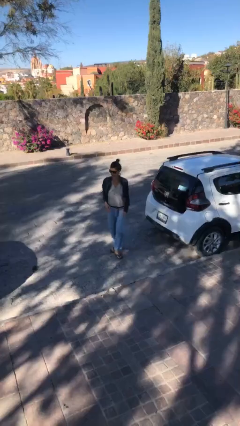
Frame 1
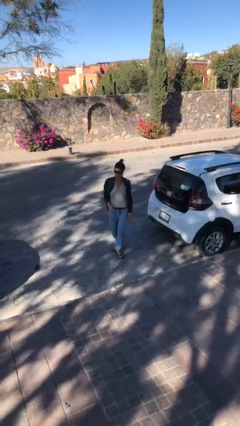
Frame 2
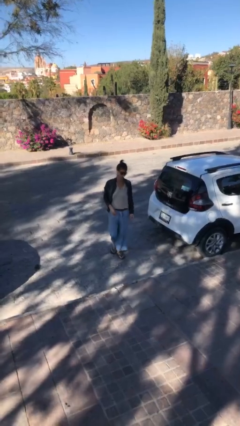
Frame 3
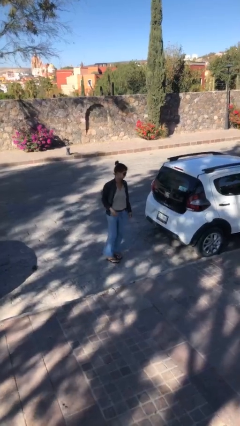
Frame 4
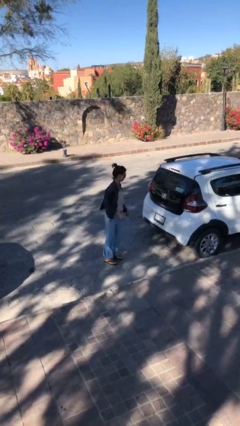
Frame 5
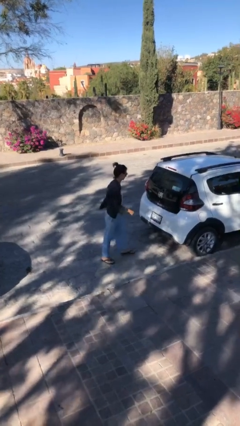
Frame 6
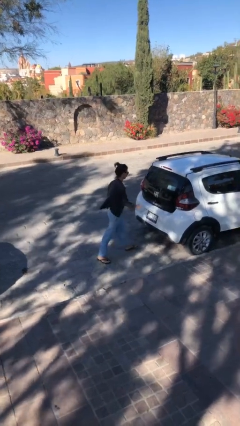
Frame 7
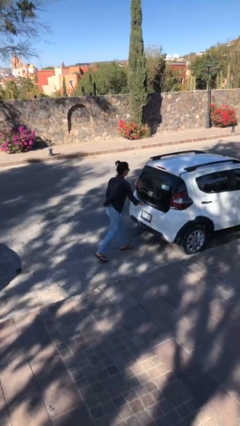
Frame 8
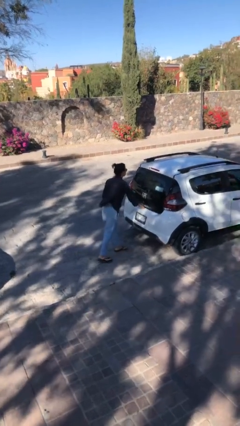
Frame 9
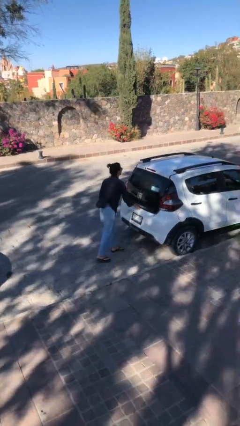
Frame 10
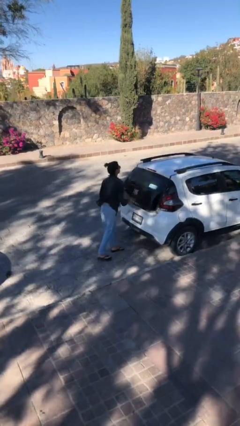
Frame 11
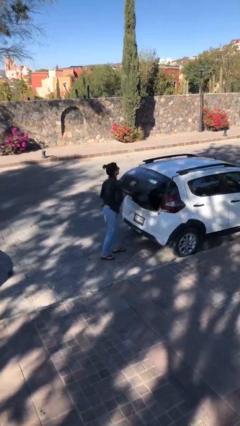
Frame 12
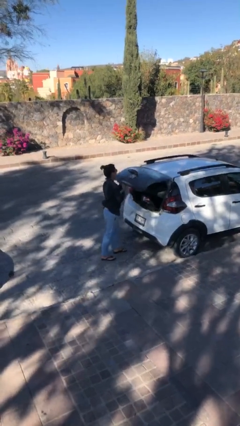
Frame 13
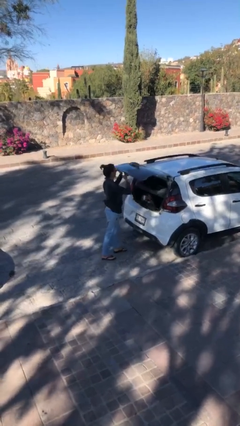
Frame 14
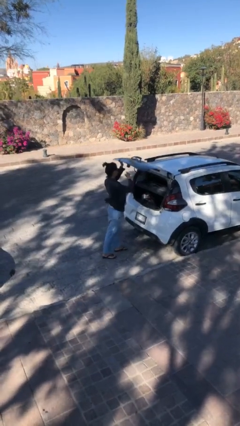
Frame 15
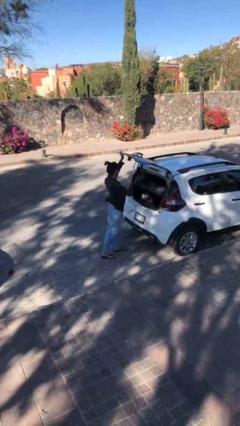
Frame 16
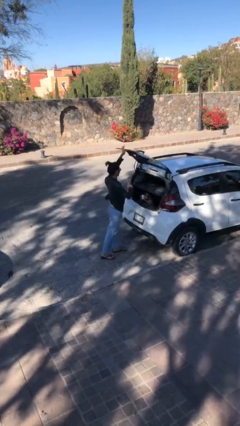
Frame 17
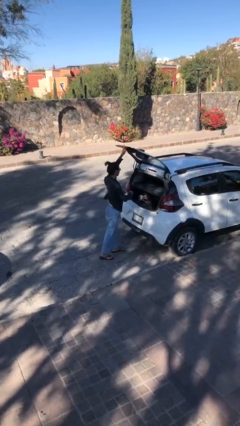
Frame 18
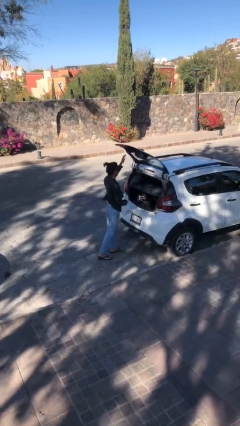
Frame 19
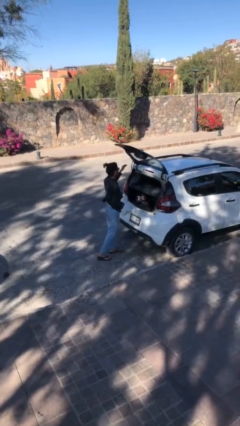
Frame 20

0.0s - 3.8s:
person opens car trunk

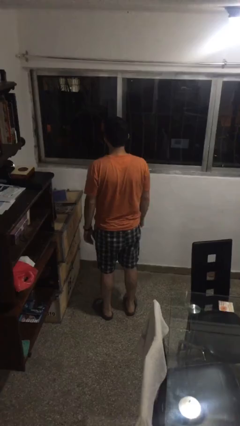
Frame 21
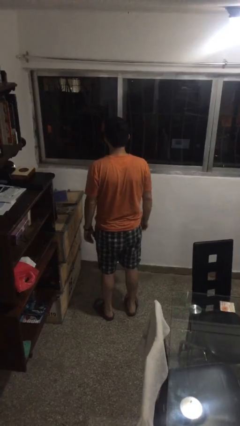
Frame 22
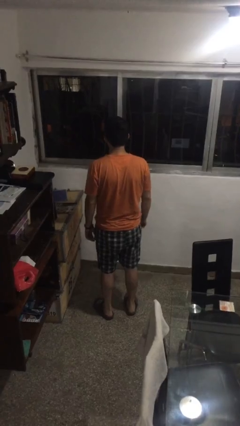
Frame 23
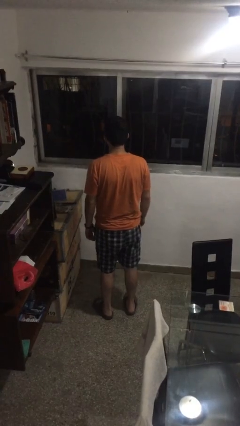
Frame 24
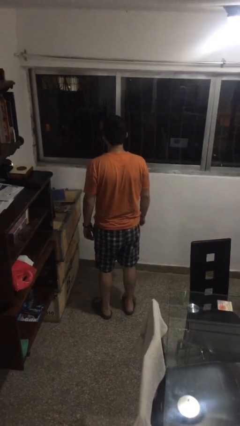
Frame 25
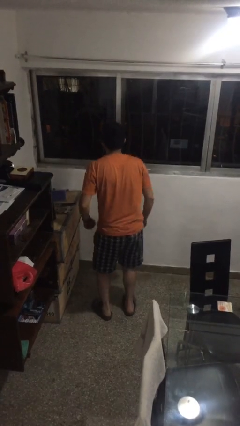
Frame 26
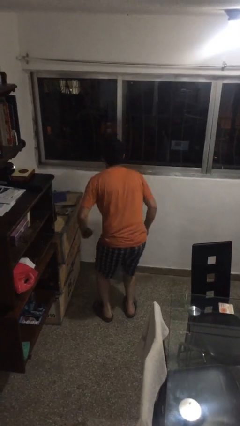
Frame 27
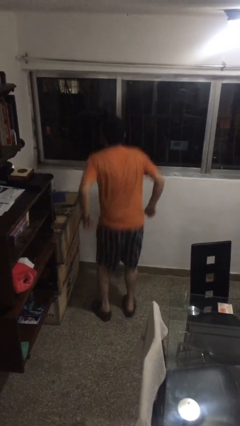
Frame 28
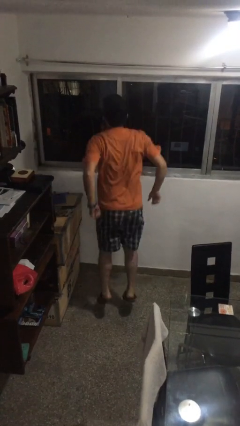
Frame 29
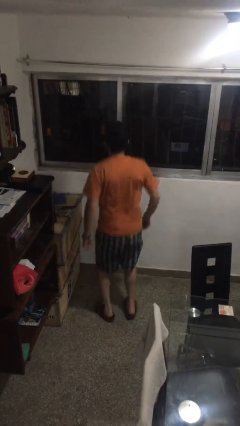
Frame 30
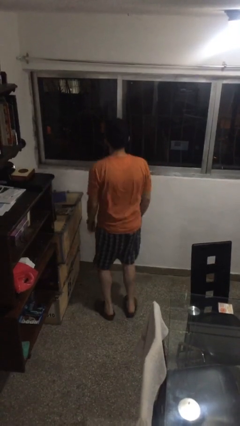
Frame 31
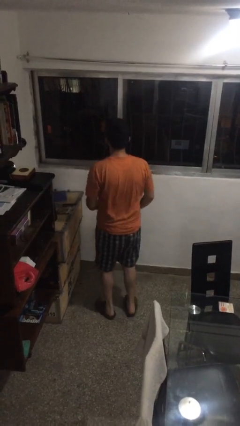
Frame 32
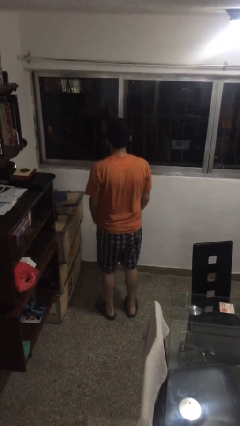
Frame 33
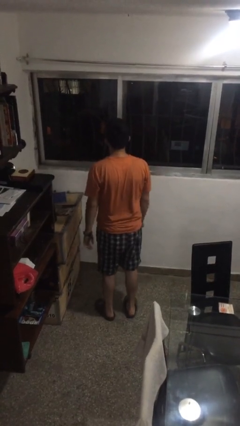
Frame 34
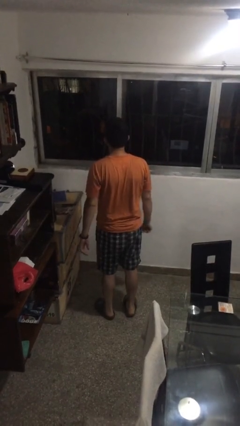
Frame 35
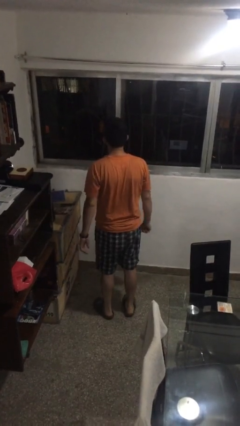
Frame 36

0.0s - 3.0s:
person jumps

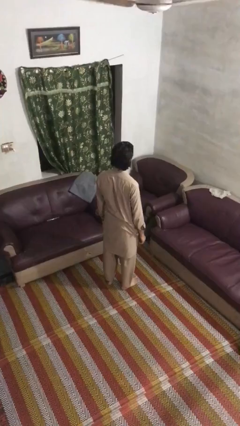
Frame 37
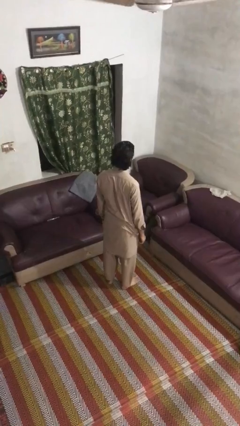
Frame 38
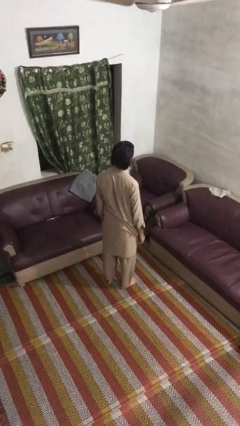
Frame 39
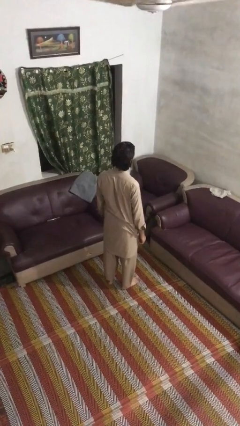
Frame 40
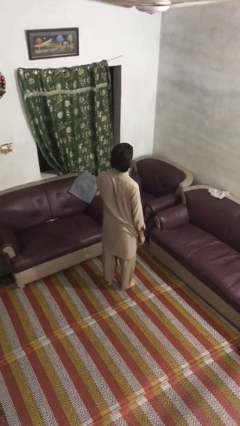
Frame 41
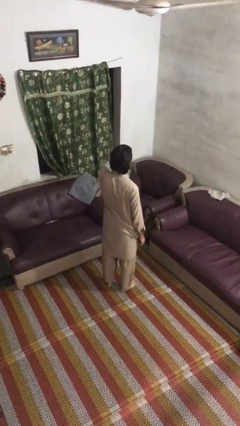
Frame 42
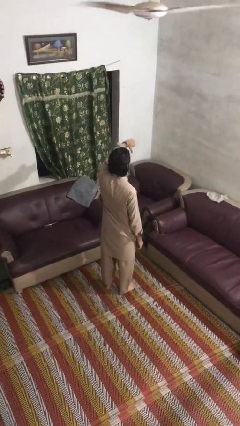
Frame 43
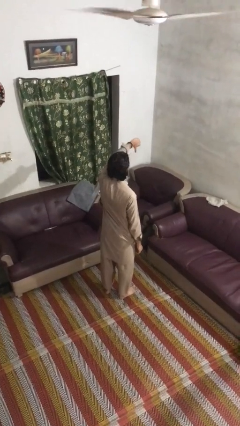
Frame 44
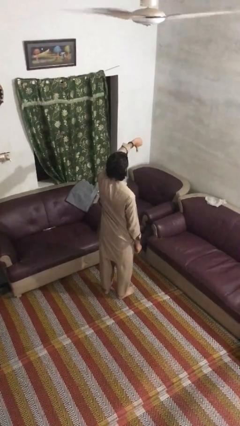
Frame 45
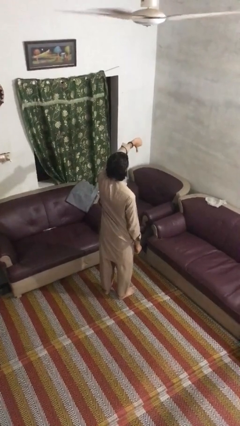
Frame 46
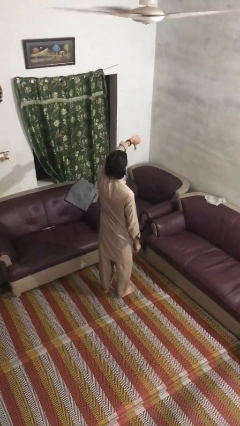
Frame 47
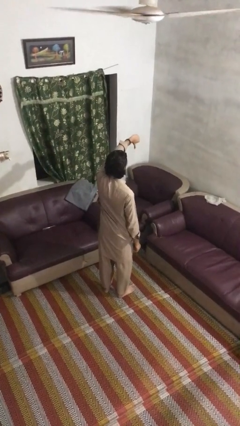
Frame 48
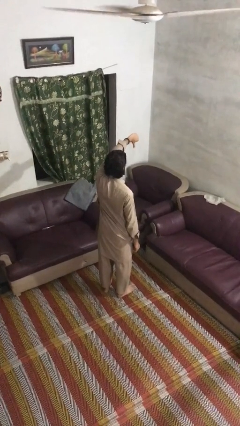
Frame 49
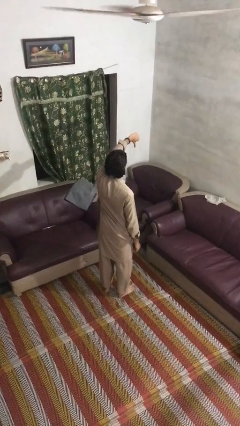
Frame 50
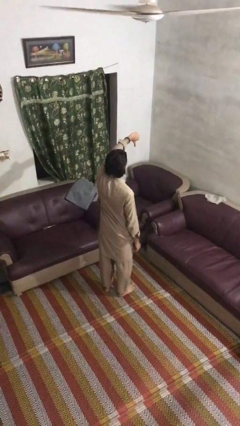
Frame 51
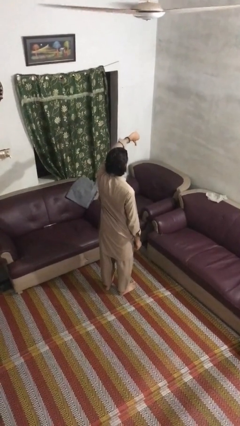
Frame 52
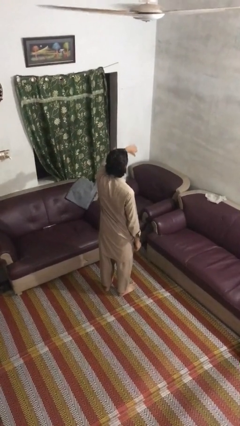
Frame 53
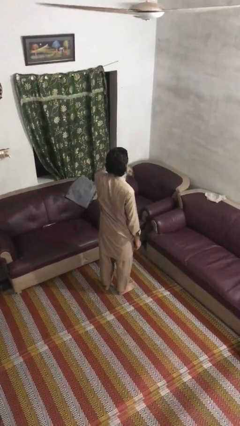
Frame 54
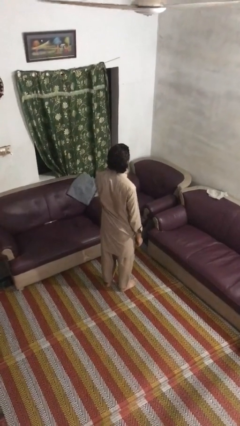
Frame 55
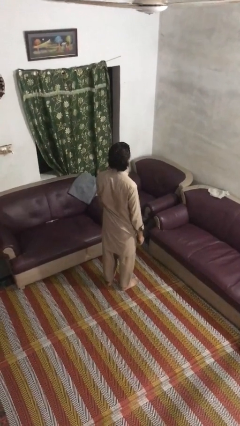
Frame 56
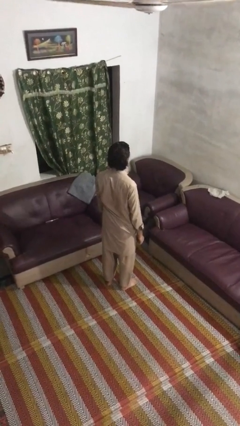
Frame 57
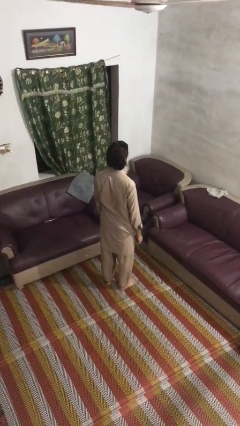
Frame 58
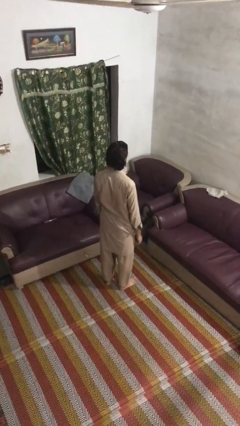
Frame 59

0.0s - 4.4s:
person gestures thumbs down

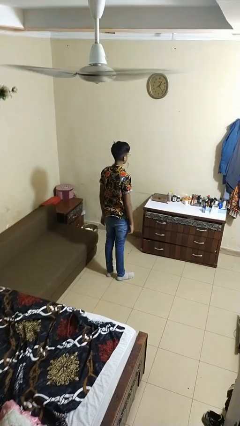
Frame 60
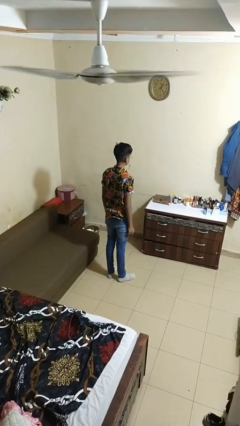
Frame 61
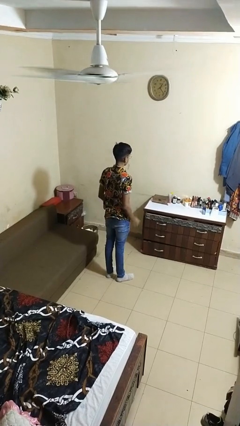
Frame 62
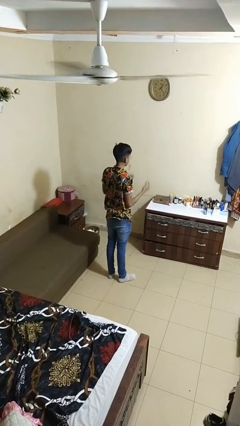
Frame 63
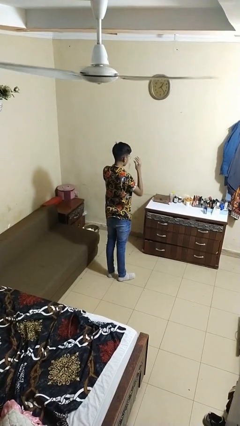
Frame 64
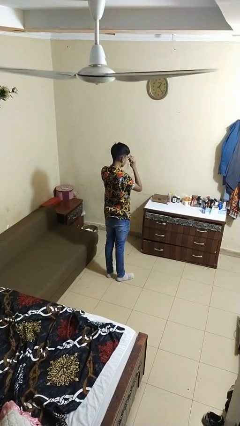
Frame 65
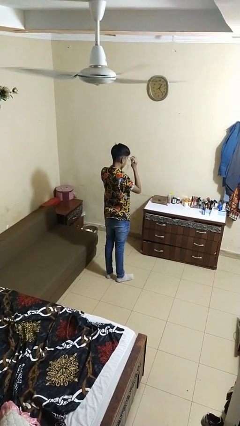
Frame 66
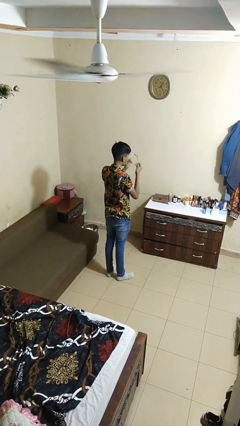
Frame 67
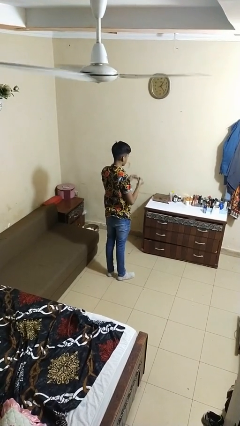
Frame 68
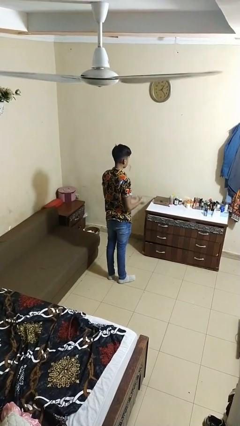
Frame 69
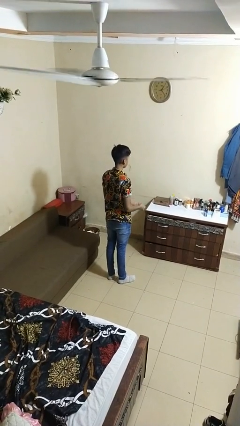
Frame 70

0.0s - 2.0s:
person takes off glasses

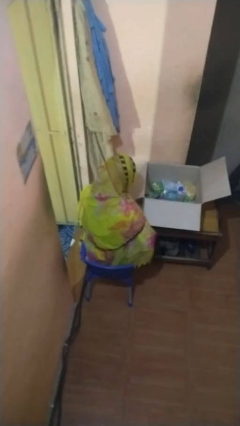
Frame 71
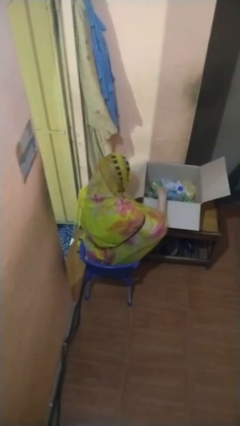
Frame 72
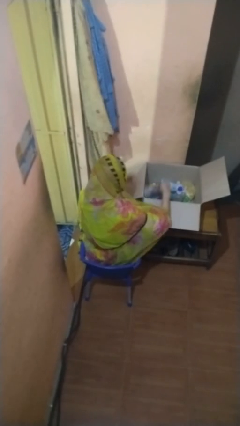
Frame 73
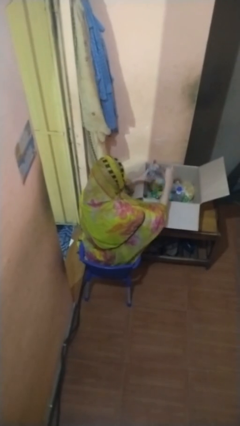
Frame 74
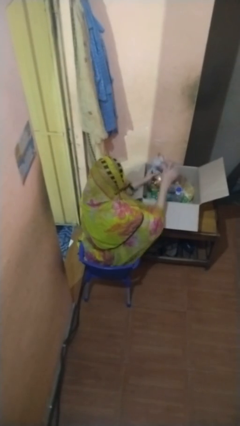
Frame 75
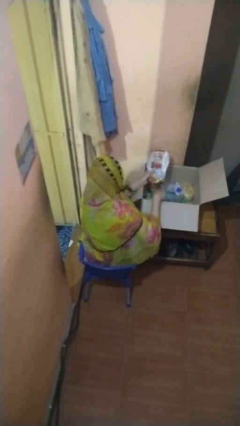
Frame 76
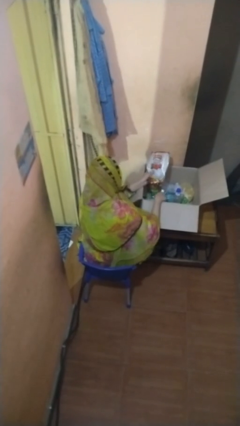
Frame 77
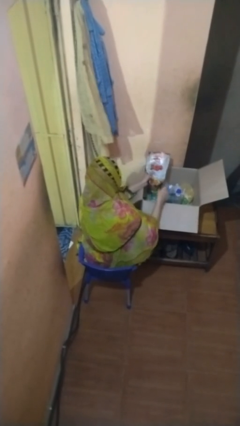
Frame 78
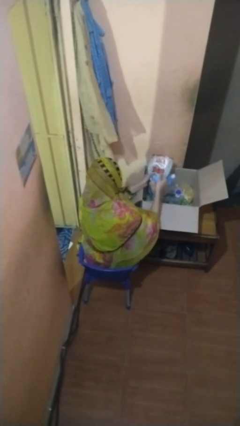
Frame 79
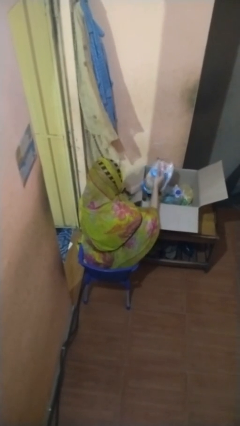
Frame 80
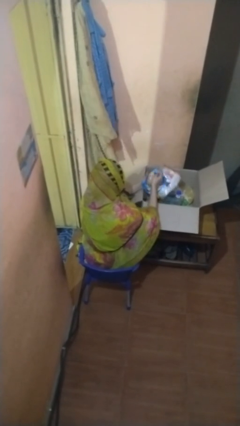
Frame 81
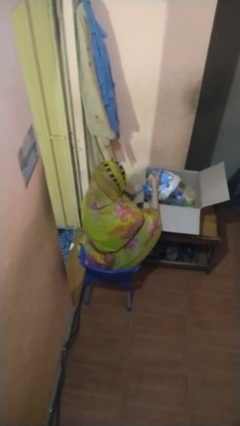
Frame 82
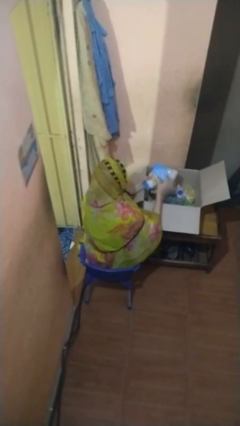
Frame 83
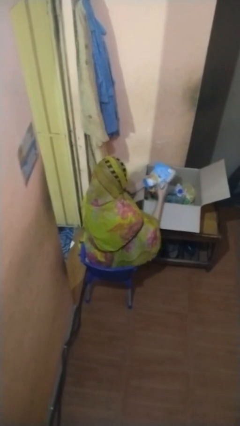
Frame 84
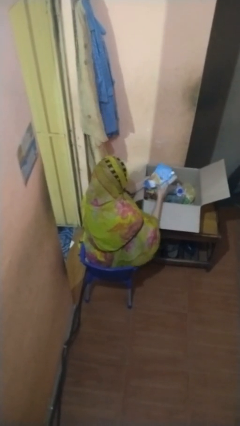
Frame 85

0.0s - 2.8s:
person takes object from box

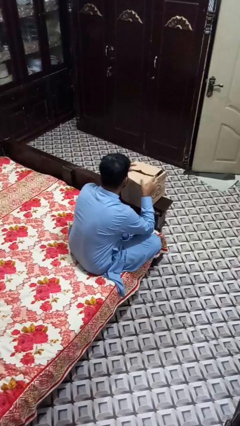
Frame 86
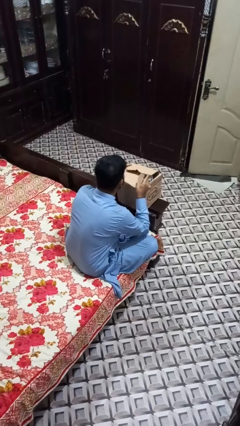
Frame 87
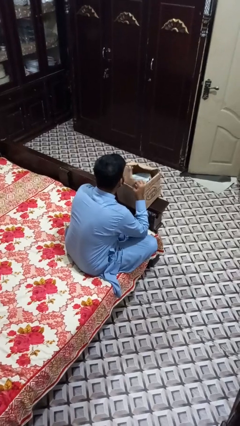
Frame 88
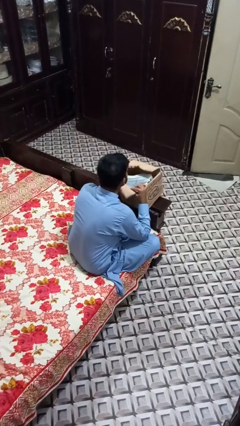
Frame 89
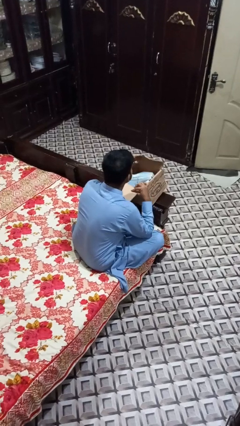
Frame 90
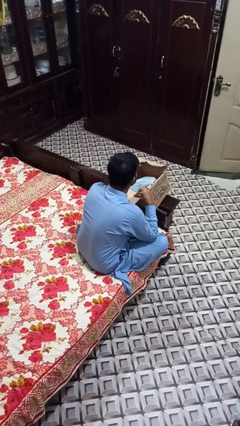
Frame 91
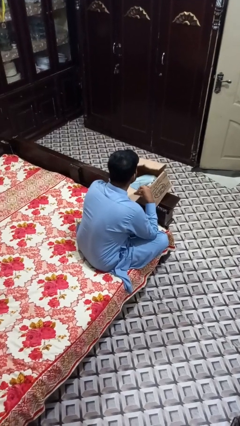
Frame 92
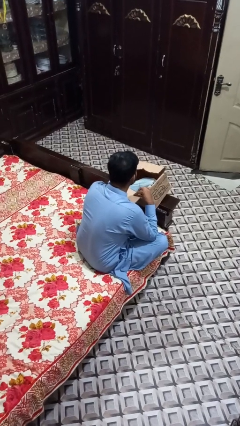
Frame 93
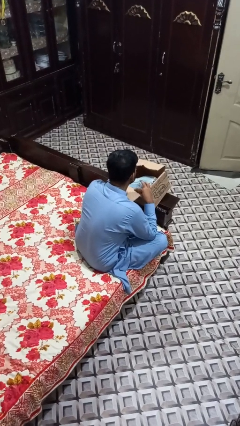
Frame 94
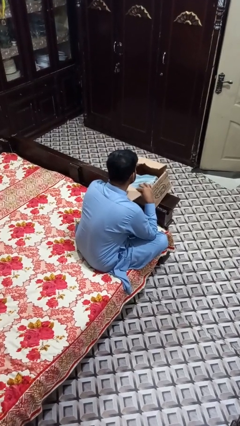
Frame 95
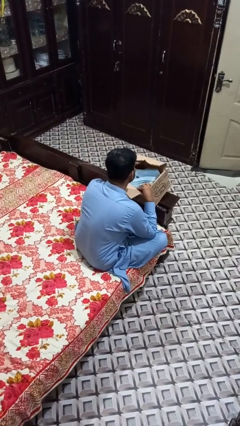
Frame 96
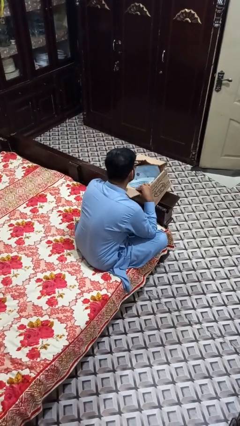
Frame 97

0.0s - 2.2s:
person opens box
